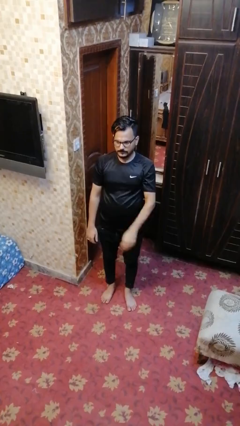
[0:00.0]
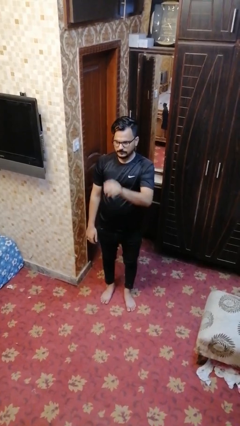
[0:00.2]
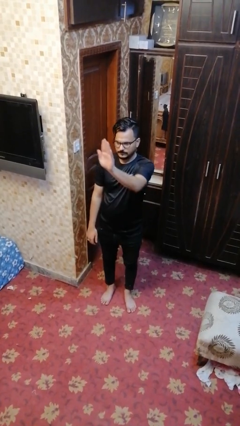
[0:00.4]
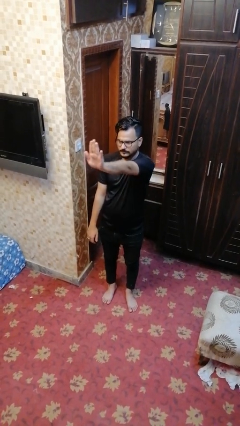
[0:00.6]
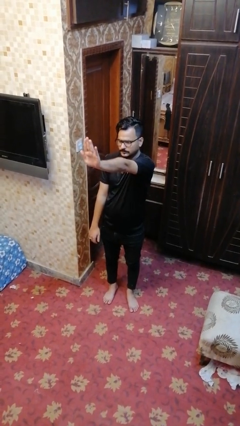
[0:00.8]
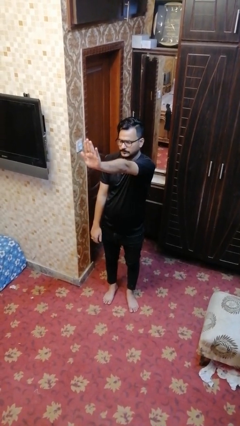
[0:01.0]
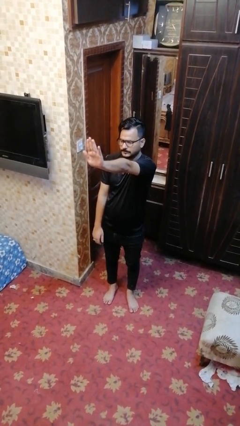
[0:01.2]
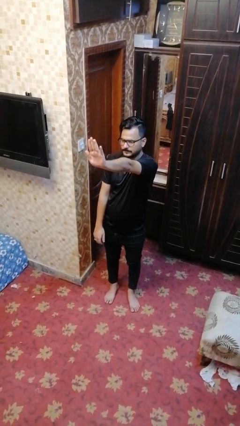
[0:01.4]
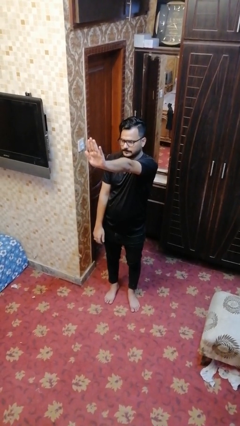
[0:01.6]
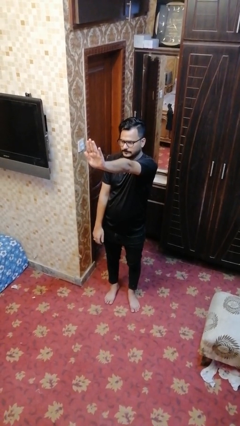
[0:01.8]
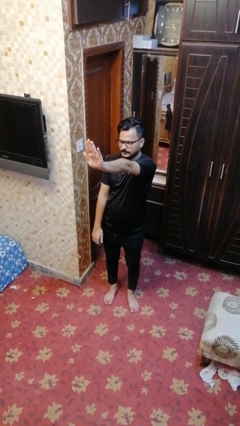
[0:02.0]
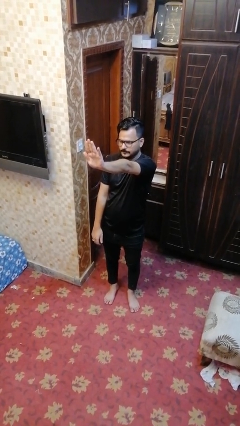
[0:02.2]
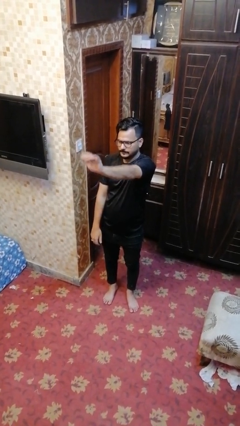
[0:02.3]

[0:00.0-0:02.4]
person gestures stop

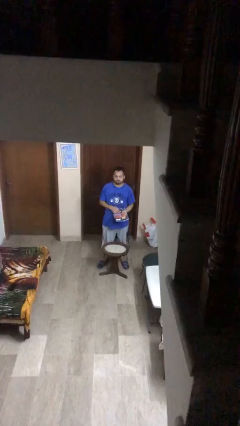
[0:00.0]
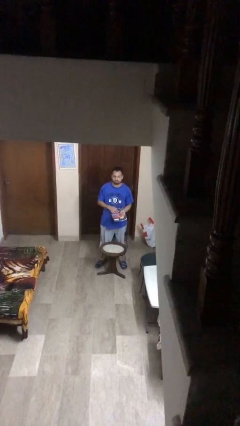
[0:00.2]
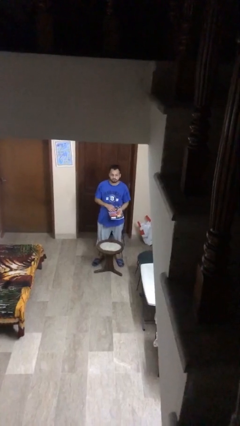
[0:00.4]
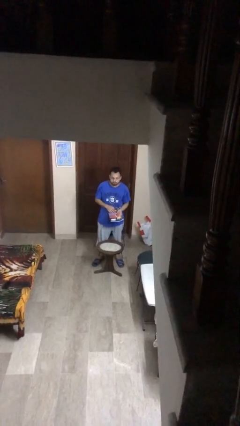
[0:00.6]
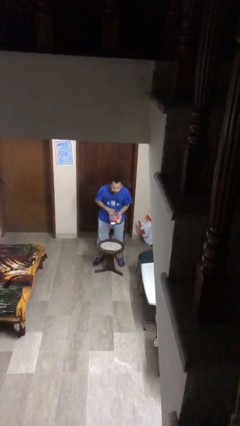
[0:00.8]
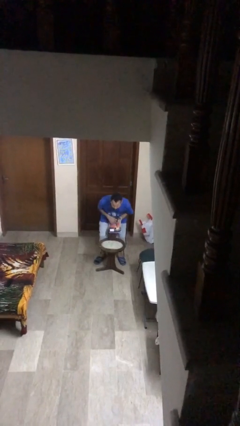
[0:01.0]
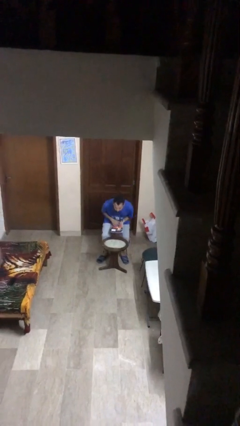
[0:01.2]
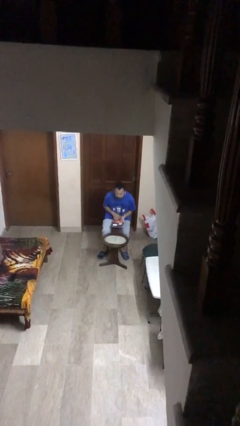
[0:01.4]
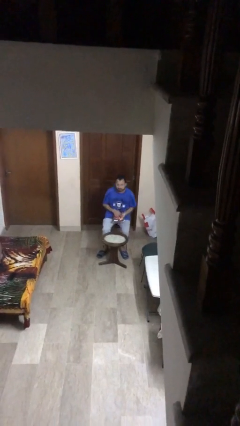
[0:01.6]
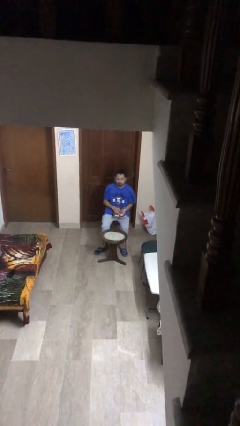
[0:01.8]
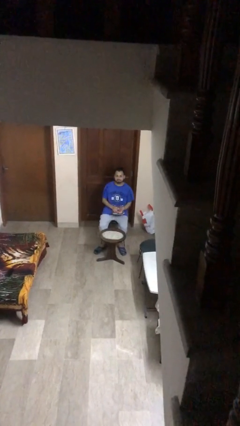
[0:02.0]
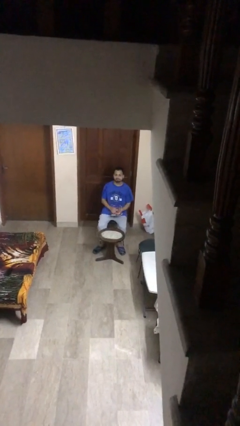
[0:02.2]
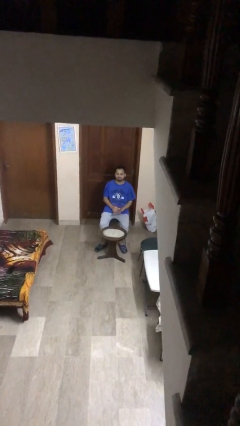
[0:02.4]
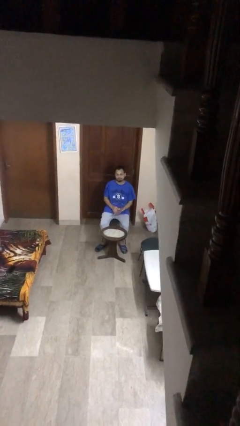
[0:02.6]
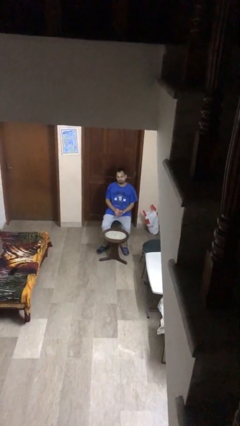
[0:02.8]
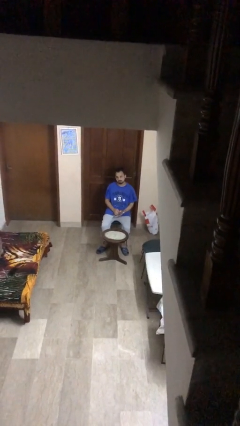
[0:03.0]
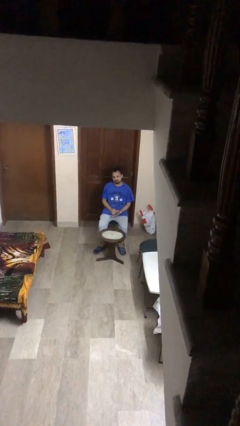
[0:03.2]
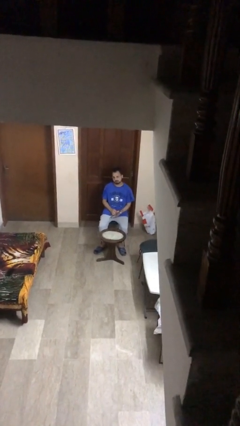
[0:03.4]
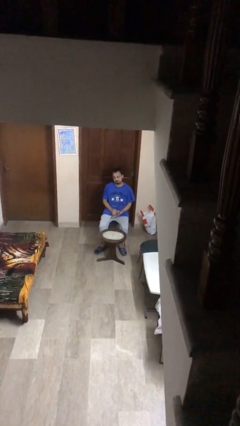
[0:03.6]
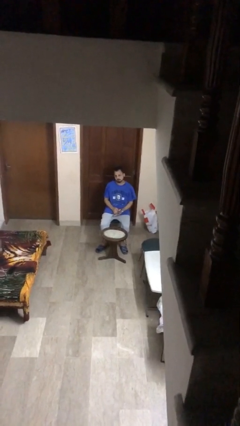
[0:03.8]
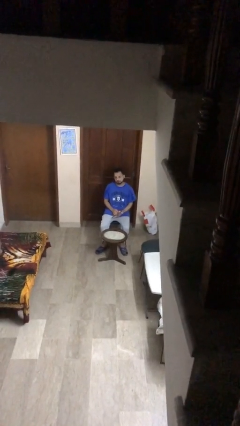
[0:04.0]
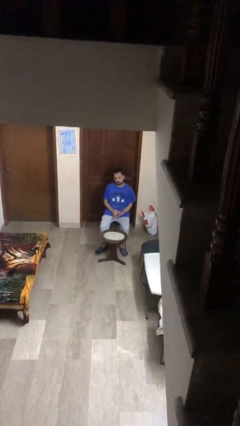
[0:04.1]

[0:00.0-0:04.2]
person sits down

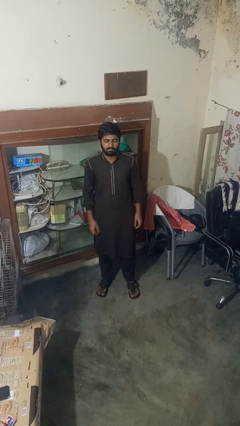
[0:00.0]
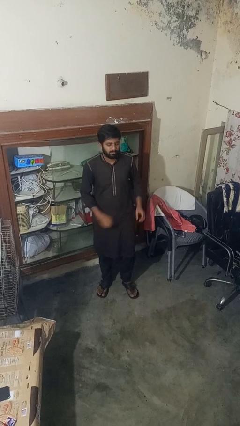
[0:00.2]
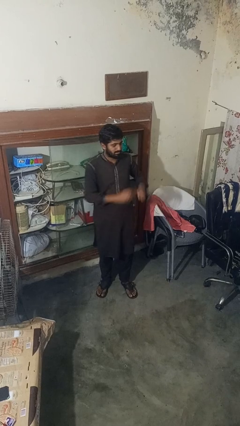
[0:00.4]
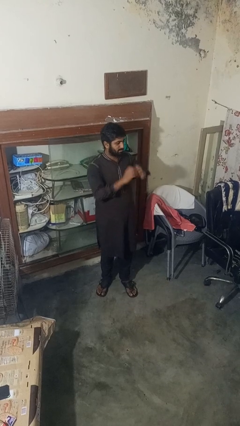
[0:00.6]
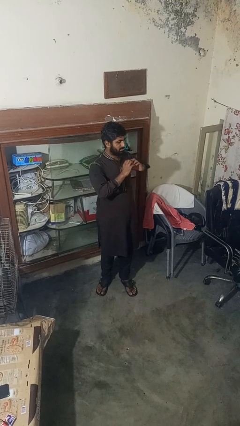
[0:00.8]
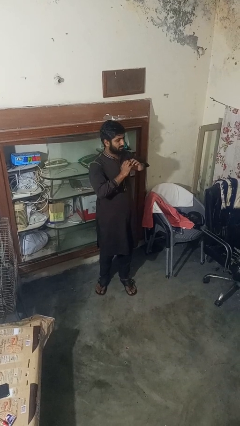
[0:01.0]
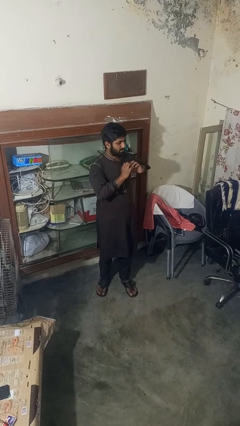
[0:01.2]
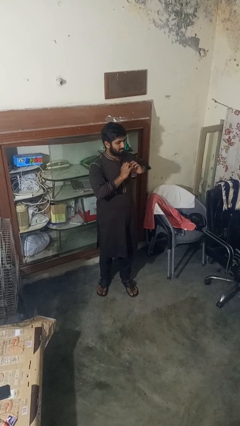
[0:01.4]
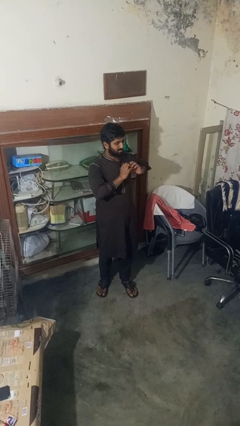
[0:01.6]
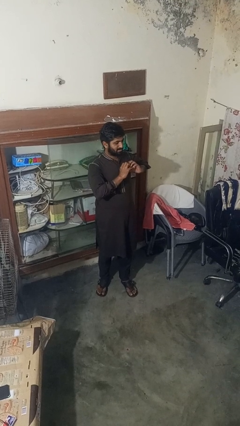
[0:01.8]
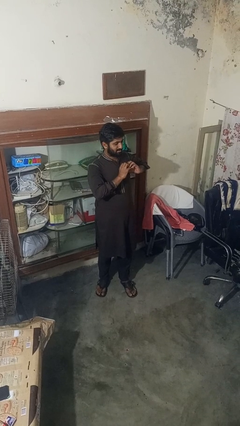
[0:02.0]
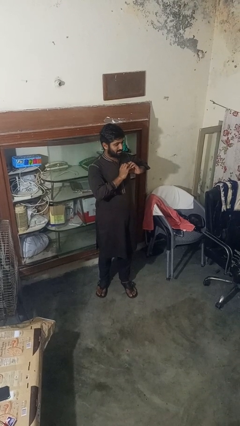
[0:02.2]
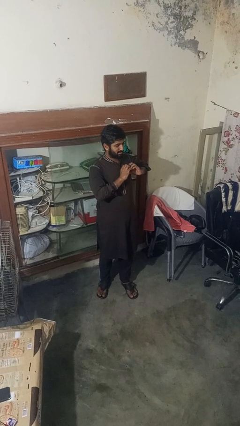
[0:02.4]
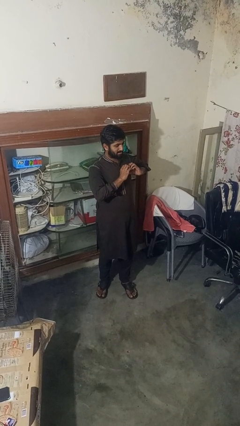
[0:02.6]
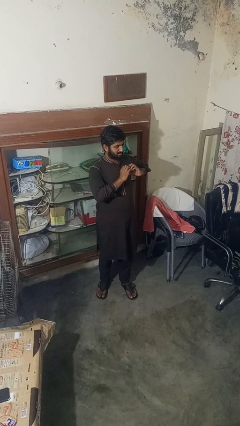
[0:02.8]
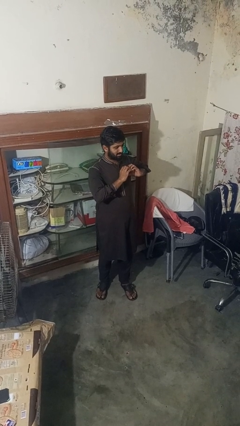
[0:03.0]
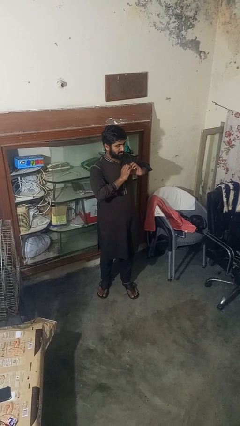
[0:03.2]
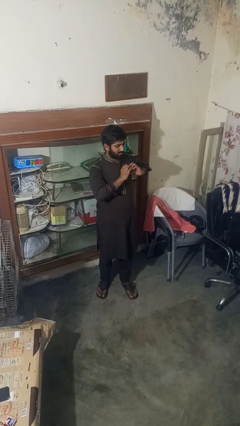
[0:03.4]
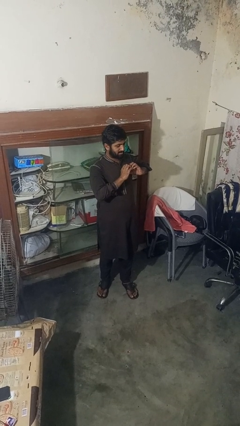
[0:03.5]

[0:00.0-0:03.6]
person gestures heart

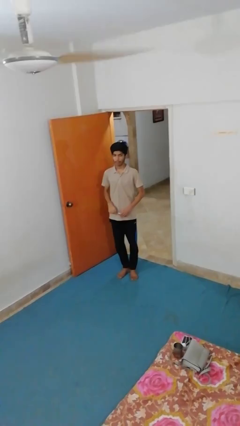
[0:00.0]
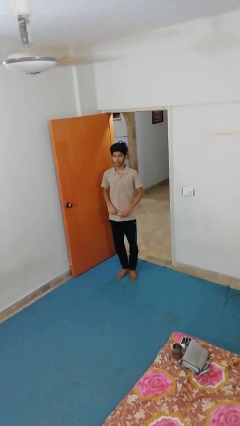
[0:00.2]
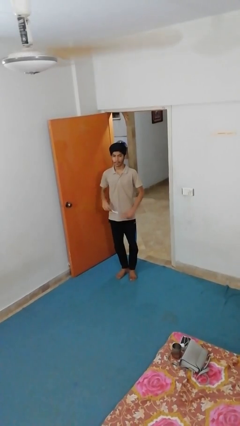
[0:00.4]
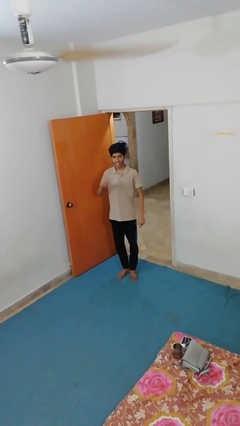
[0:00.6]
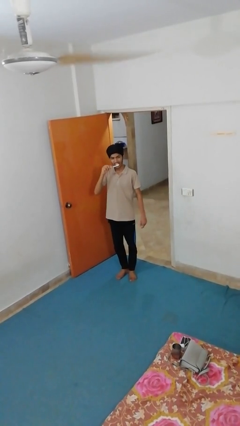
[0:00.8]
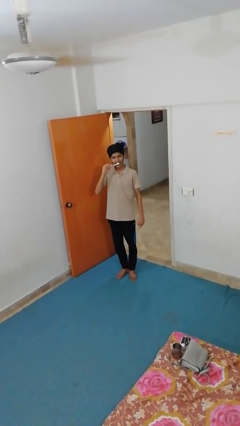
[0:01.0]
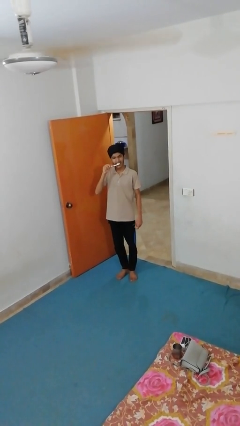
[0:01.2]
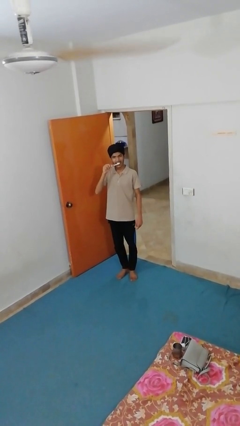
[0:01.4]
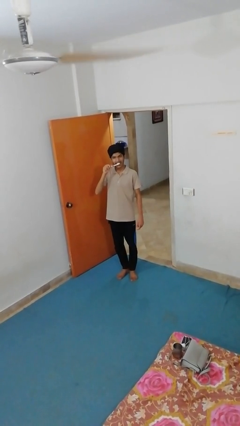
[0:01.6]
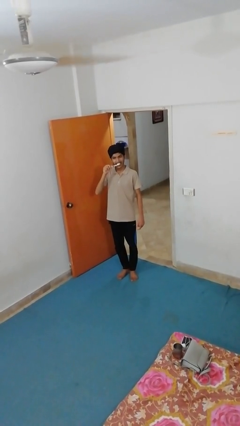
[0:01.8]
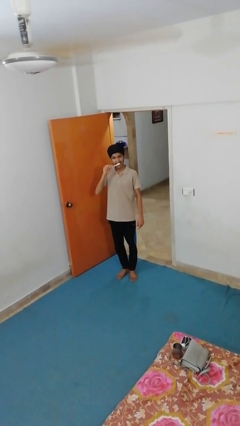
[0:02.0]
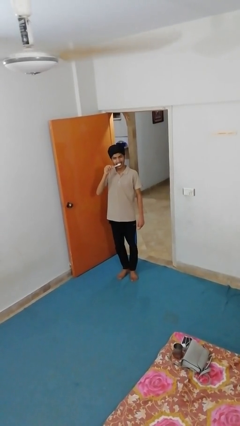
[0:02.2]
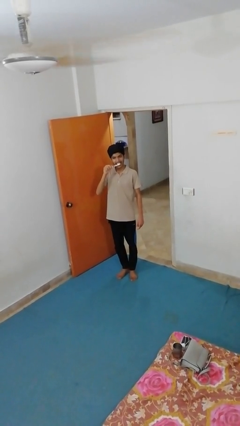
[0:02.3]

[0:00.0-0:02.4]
person brushes teeth

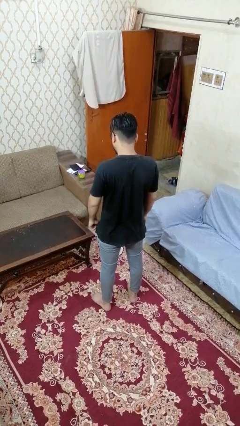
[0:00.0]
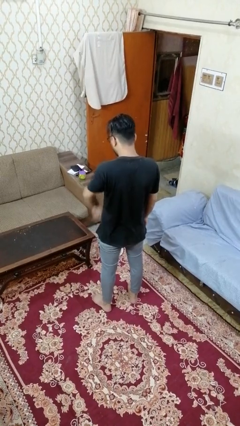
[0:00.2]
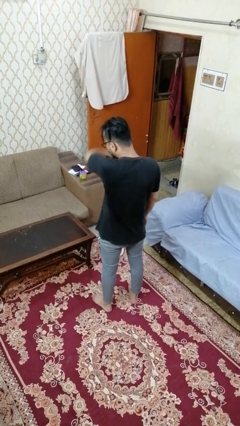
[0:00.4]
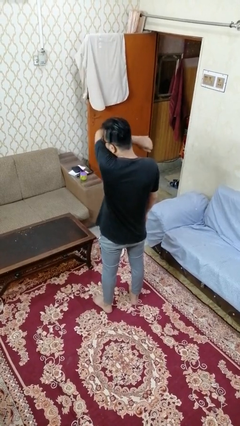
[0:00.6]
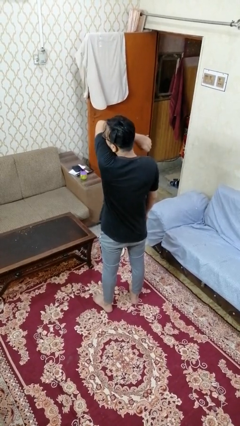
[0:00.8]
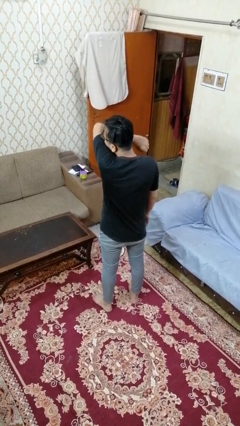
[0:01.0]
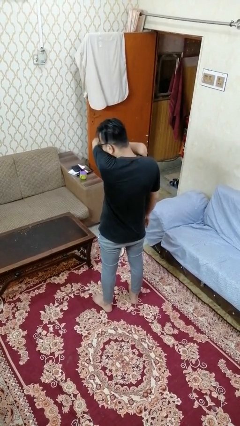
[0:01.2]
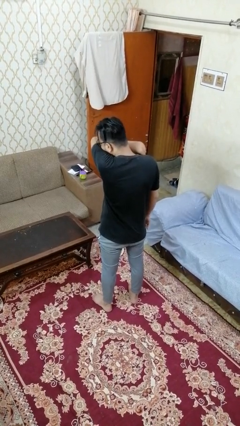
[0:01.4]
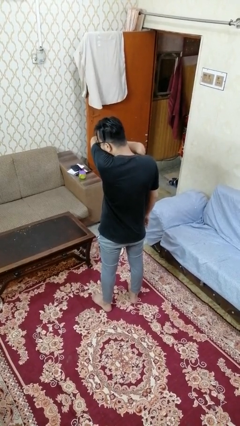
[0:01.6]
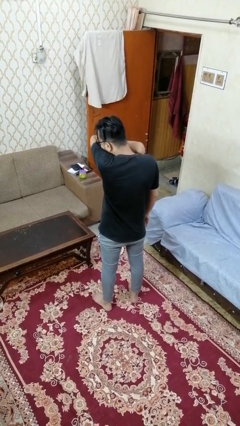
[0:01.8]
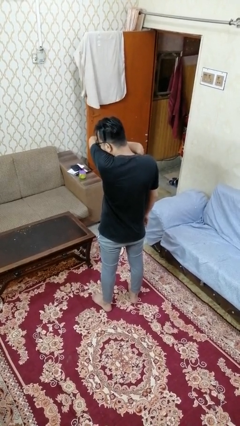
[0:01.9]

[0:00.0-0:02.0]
person sneezes into arm

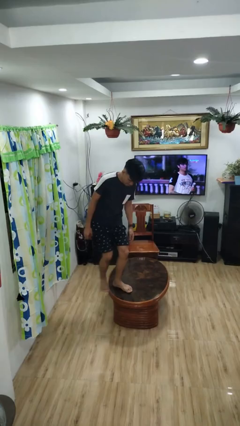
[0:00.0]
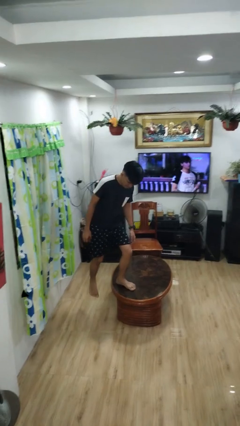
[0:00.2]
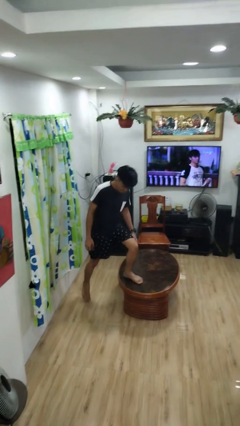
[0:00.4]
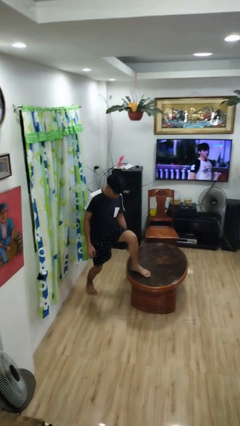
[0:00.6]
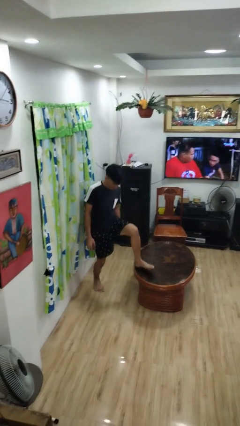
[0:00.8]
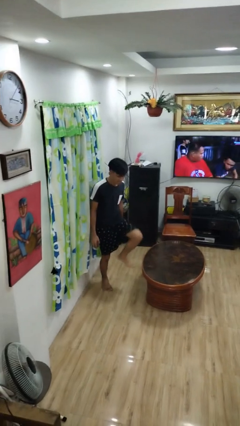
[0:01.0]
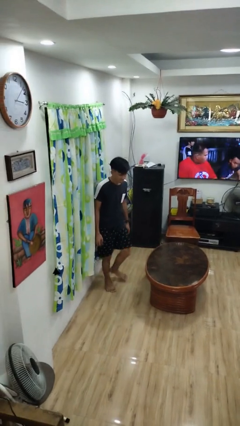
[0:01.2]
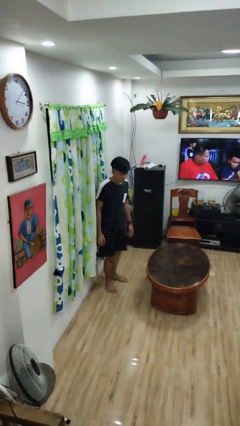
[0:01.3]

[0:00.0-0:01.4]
person climbs off table

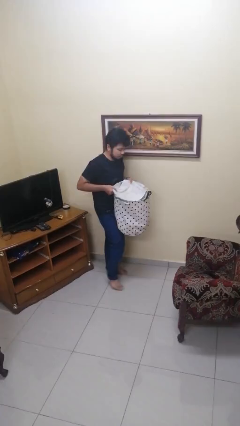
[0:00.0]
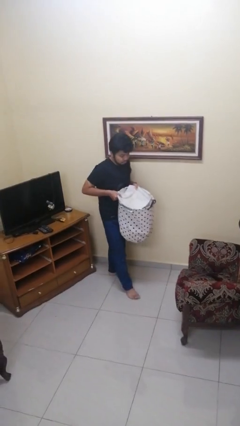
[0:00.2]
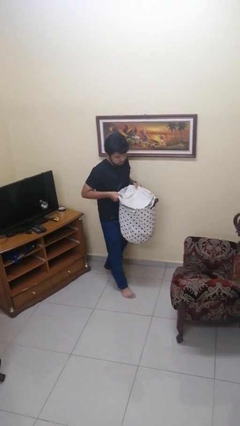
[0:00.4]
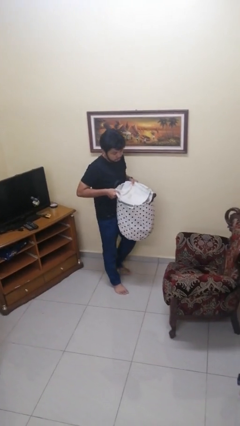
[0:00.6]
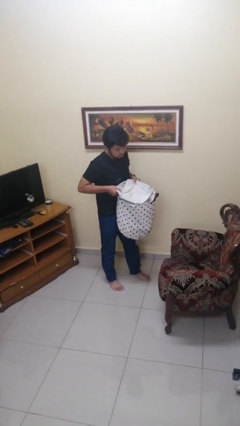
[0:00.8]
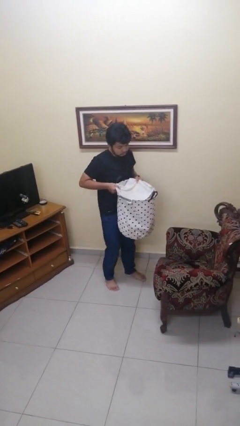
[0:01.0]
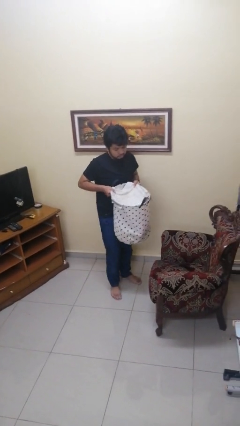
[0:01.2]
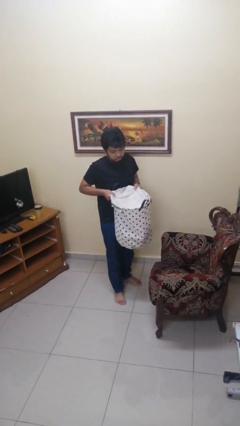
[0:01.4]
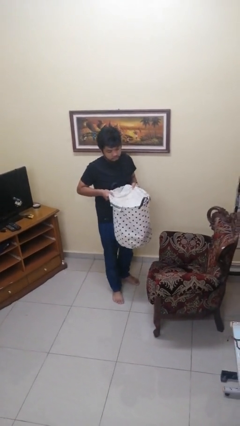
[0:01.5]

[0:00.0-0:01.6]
person carries laundry basket
